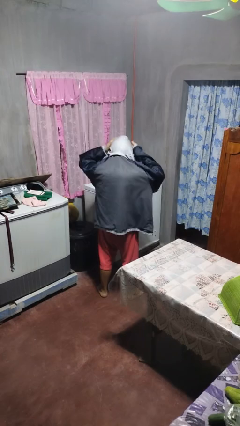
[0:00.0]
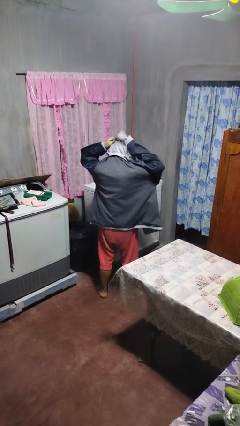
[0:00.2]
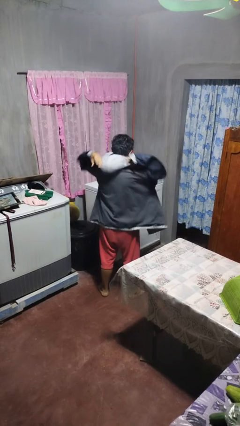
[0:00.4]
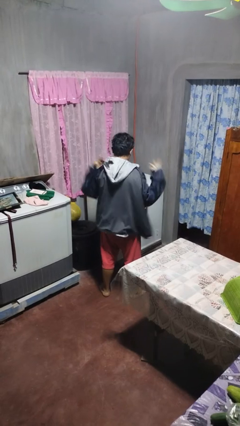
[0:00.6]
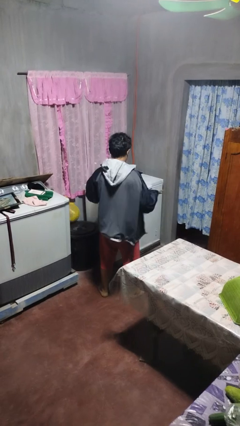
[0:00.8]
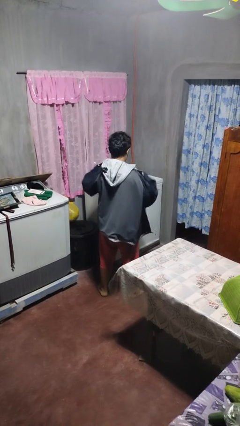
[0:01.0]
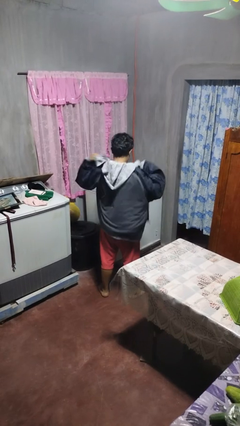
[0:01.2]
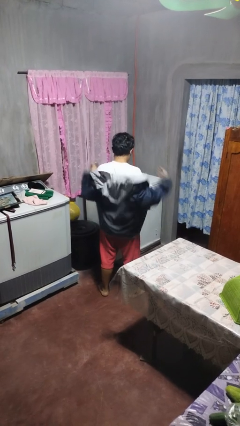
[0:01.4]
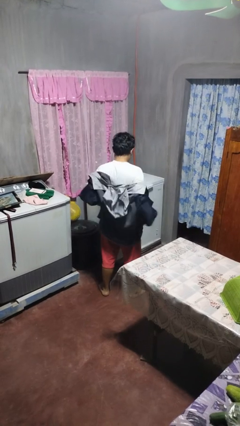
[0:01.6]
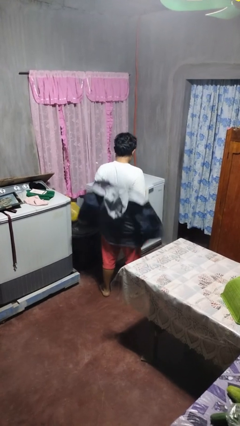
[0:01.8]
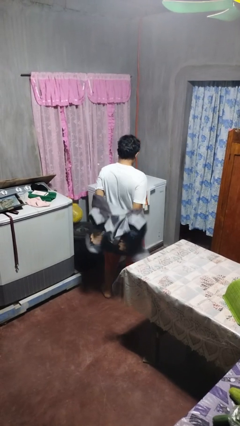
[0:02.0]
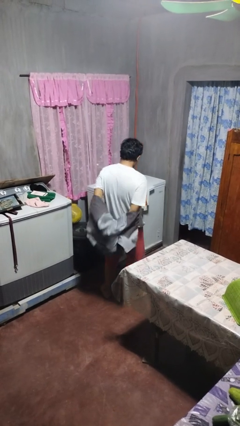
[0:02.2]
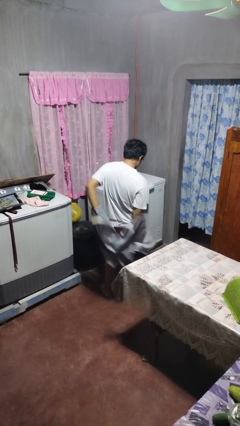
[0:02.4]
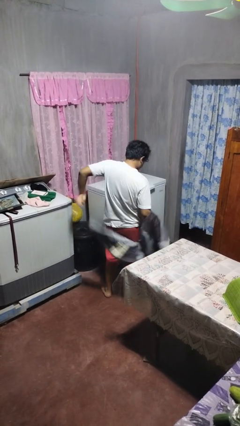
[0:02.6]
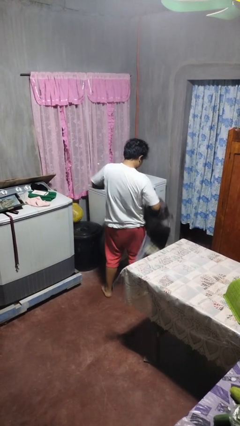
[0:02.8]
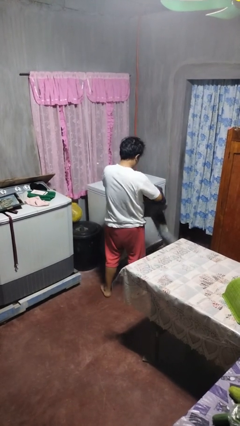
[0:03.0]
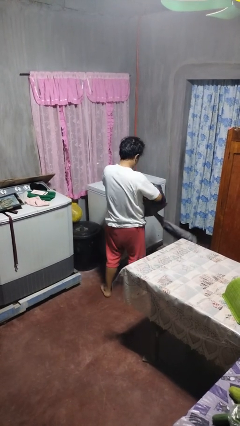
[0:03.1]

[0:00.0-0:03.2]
person takes off hoodie

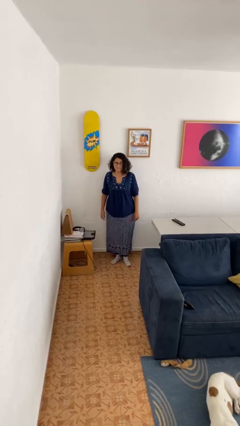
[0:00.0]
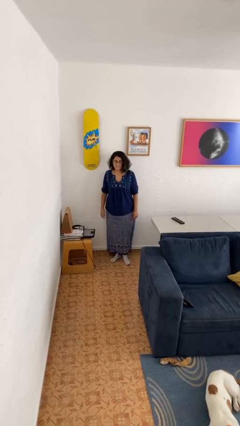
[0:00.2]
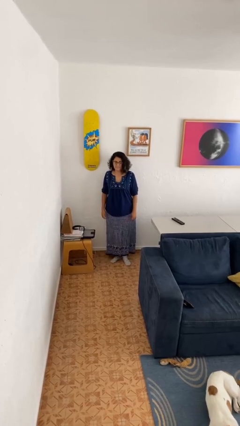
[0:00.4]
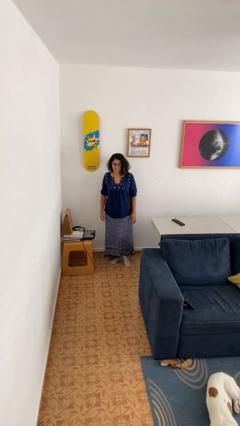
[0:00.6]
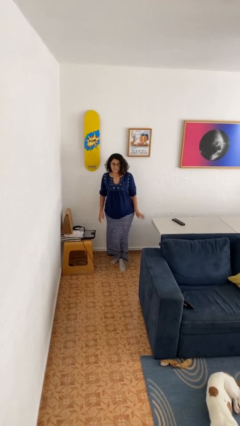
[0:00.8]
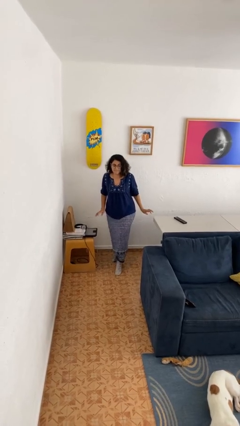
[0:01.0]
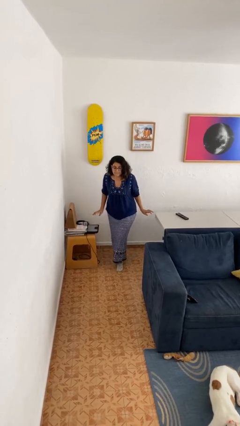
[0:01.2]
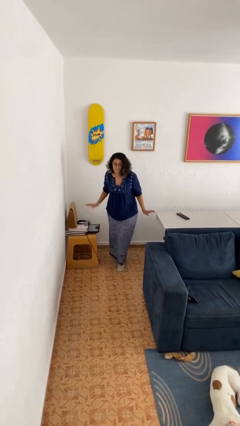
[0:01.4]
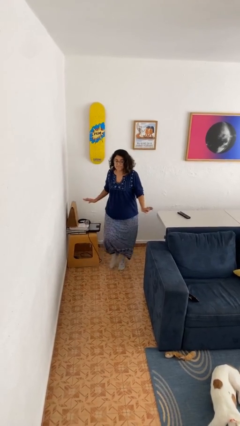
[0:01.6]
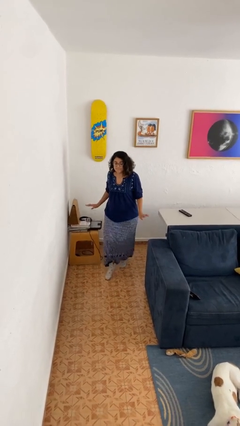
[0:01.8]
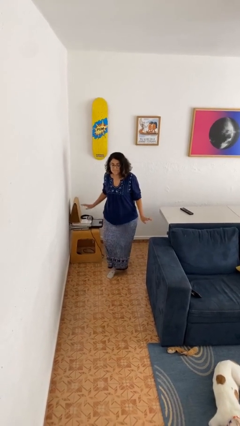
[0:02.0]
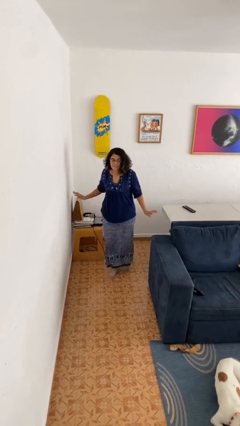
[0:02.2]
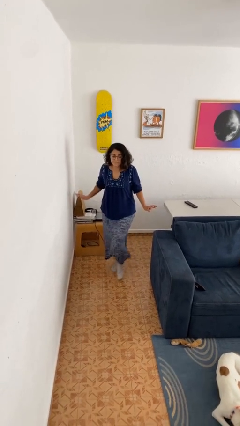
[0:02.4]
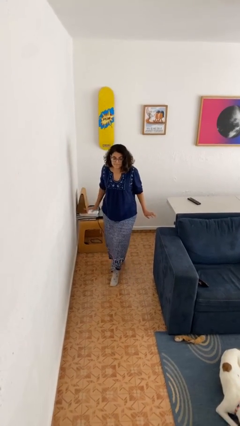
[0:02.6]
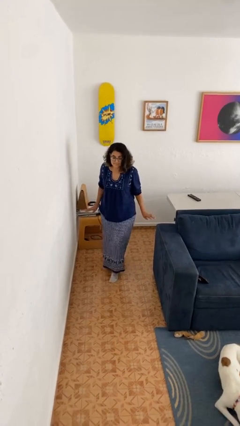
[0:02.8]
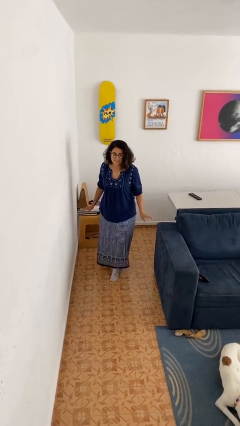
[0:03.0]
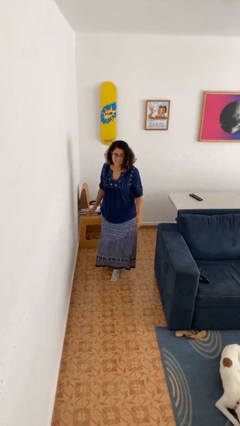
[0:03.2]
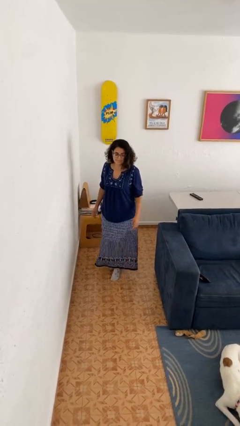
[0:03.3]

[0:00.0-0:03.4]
person walks tiptoe

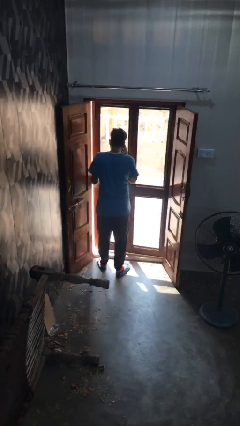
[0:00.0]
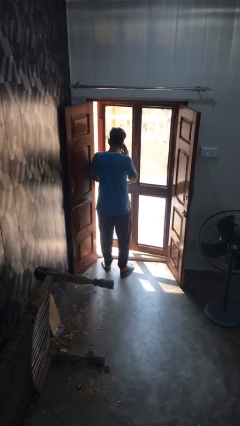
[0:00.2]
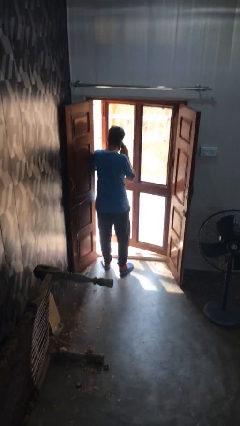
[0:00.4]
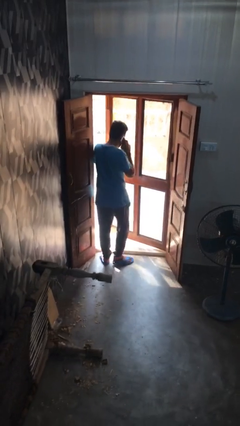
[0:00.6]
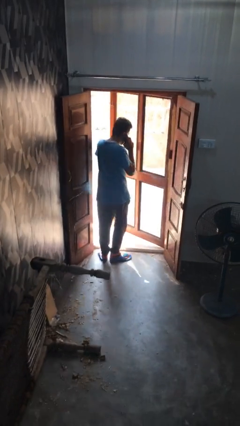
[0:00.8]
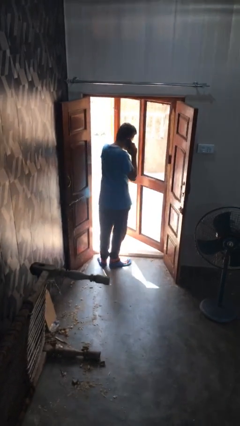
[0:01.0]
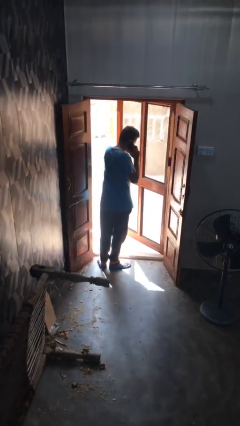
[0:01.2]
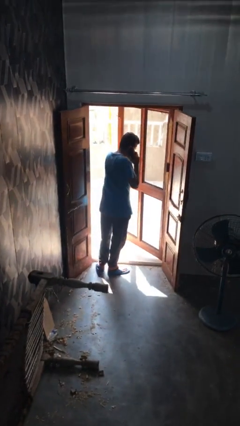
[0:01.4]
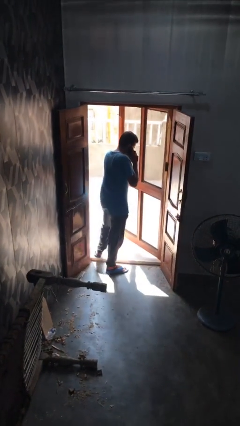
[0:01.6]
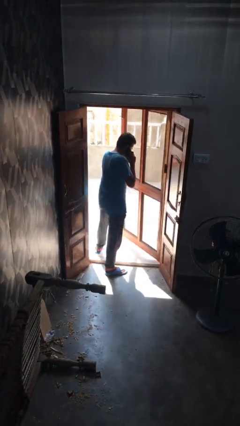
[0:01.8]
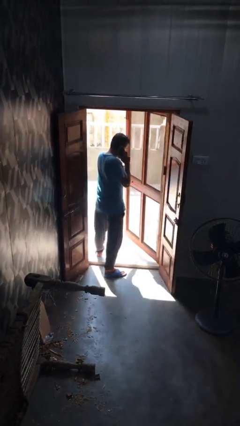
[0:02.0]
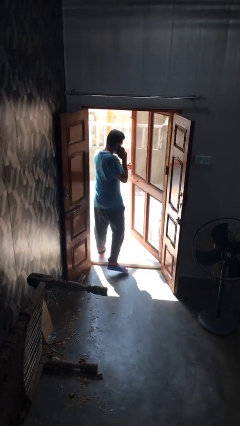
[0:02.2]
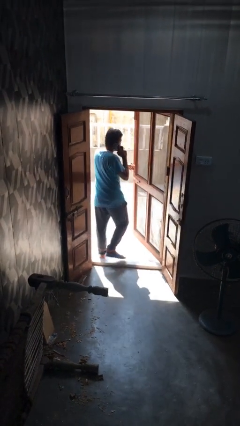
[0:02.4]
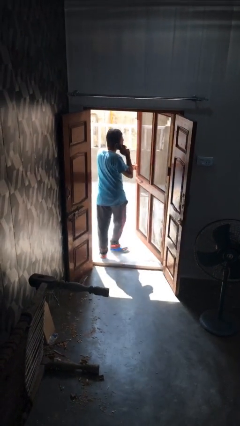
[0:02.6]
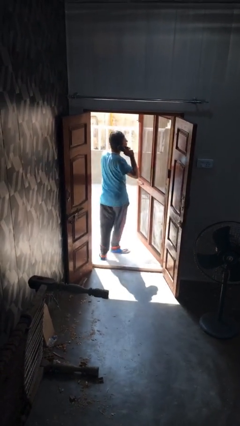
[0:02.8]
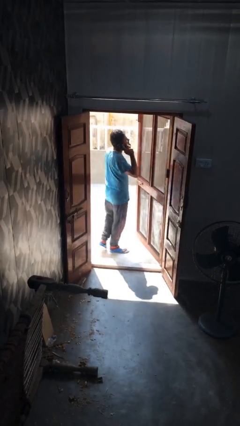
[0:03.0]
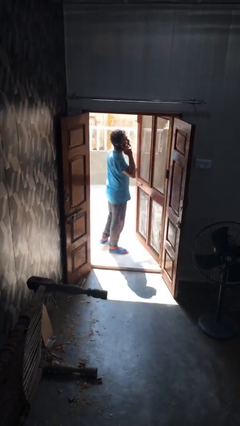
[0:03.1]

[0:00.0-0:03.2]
person opens facility door

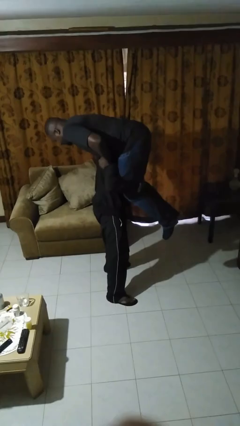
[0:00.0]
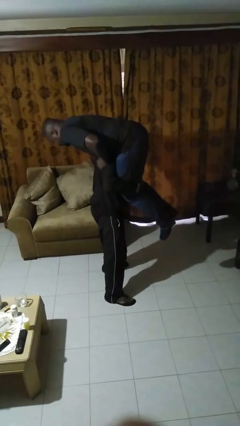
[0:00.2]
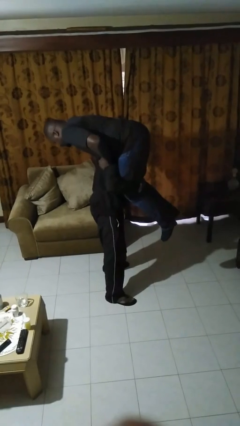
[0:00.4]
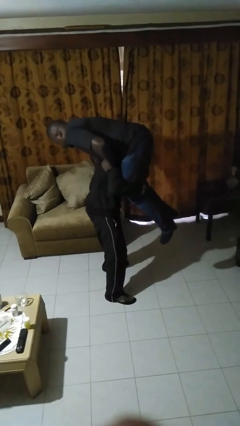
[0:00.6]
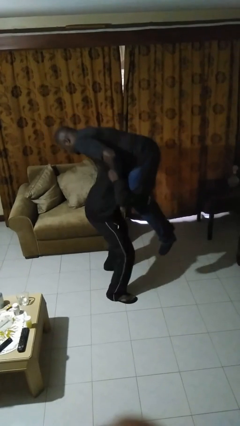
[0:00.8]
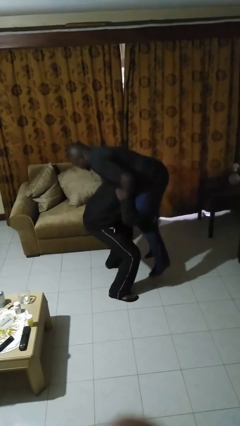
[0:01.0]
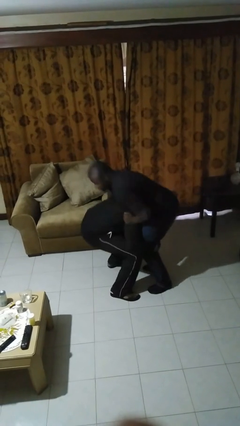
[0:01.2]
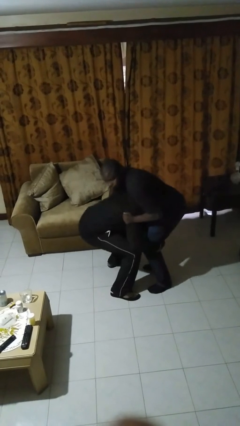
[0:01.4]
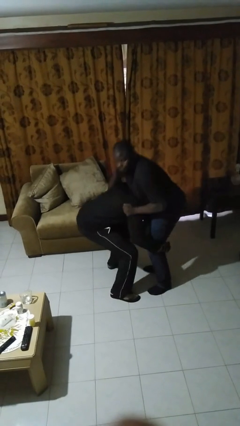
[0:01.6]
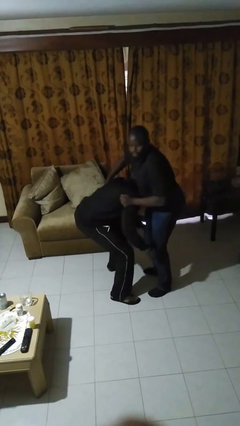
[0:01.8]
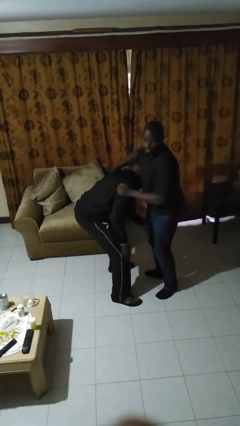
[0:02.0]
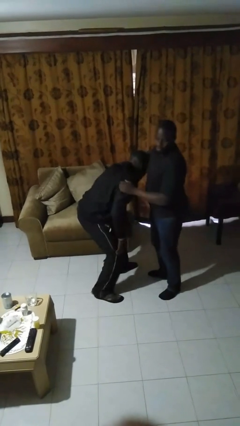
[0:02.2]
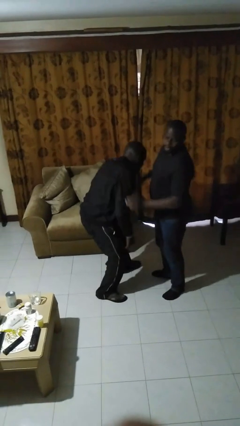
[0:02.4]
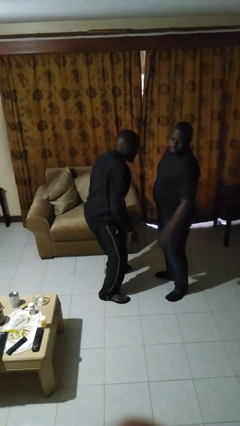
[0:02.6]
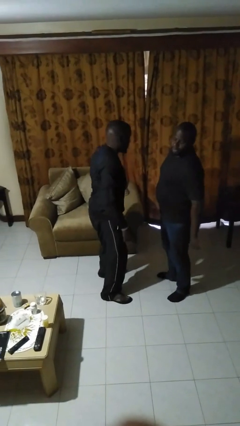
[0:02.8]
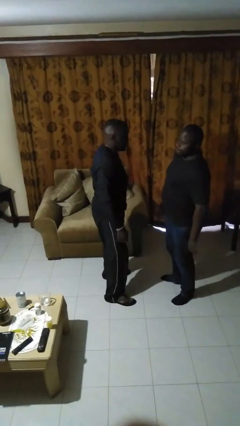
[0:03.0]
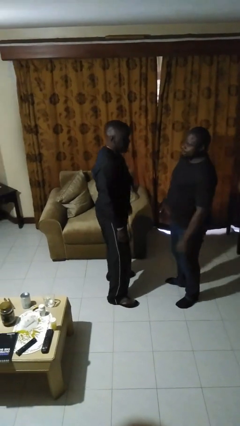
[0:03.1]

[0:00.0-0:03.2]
person puts down person

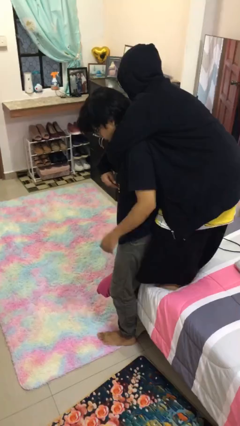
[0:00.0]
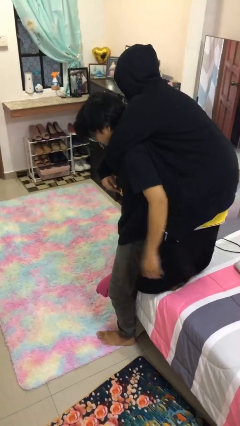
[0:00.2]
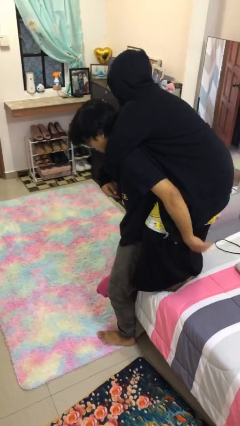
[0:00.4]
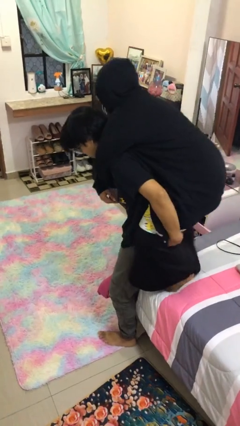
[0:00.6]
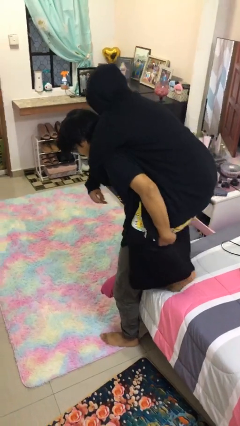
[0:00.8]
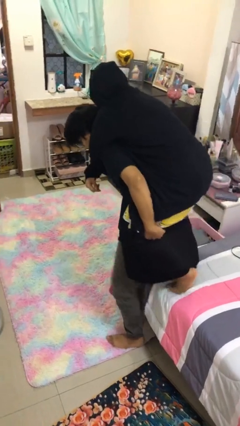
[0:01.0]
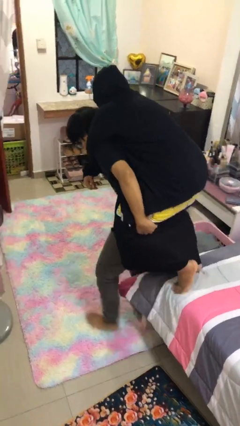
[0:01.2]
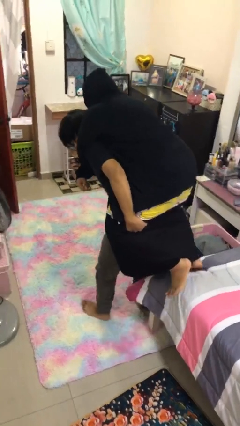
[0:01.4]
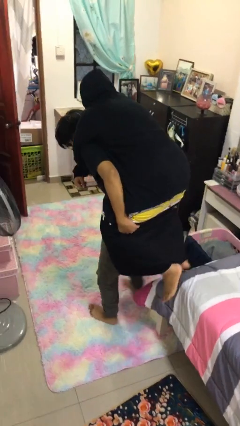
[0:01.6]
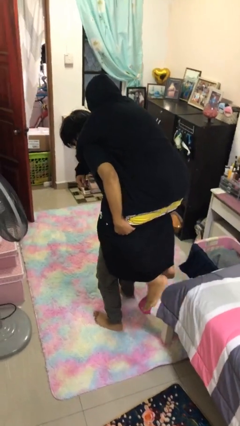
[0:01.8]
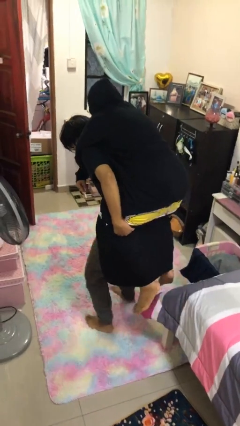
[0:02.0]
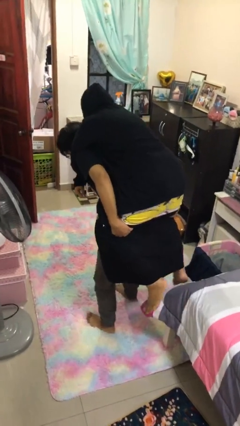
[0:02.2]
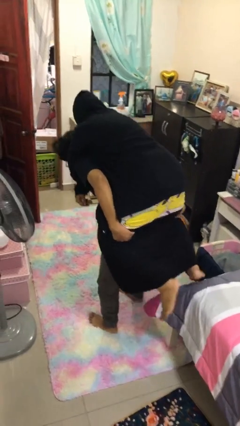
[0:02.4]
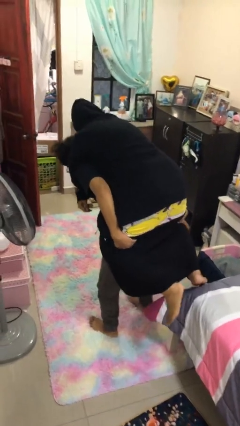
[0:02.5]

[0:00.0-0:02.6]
person carries person over shoulder

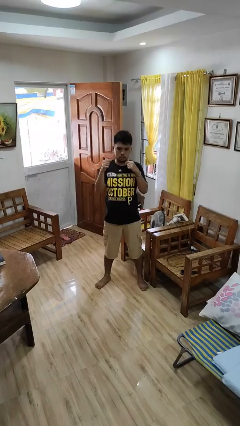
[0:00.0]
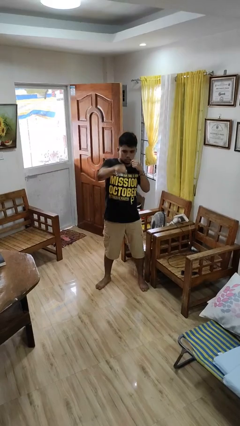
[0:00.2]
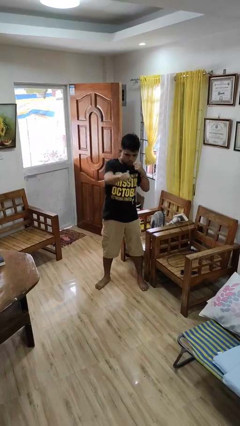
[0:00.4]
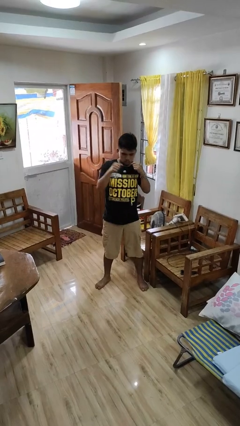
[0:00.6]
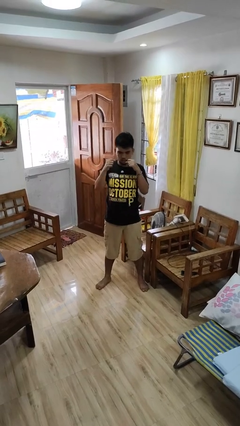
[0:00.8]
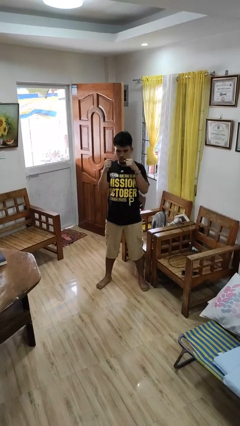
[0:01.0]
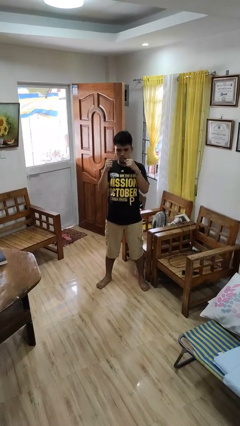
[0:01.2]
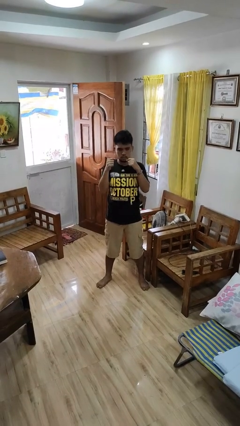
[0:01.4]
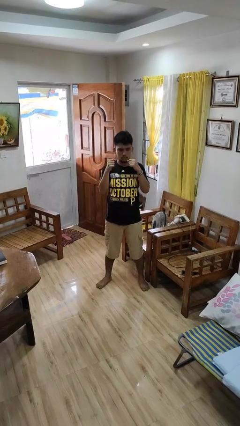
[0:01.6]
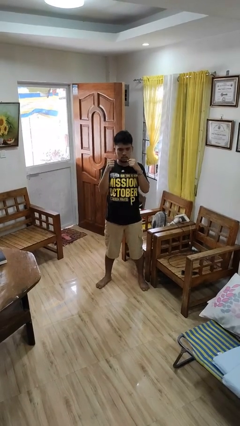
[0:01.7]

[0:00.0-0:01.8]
person punches

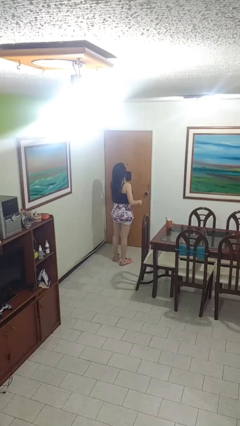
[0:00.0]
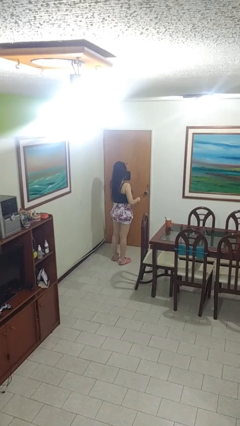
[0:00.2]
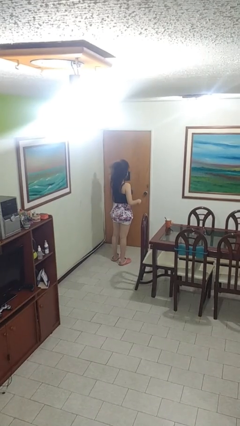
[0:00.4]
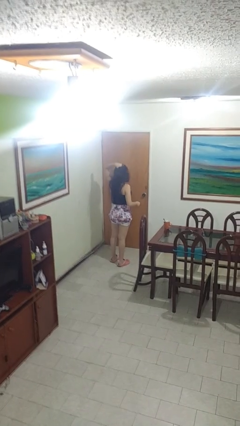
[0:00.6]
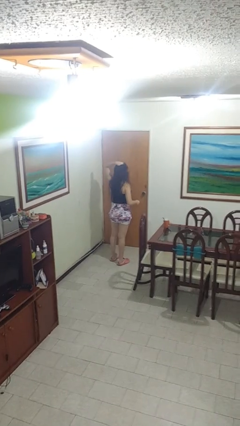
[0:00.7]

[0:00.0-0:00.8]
person strokes hair
